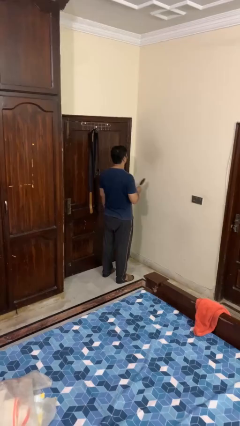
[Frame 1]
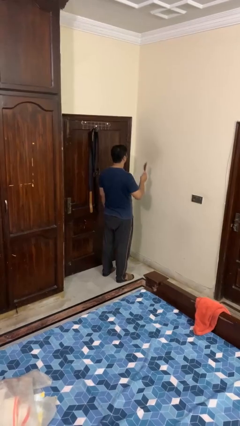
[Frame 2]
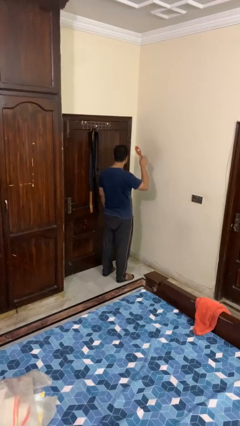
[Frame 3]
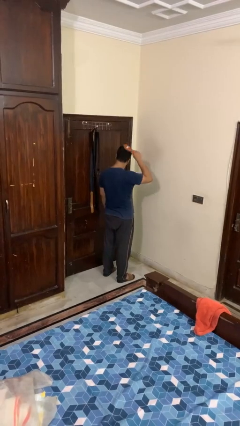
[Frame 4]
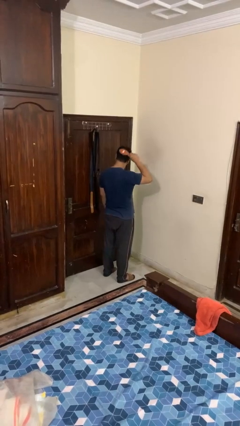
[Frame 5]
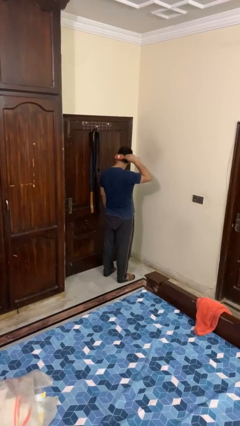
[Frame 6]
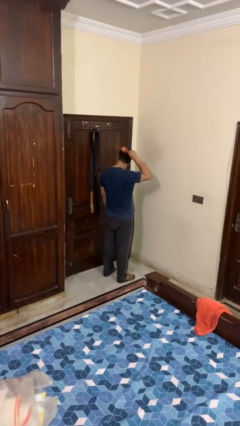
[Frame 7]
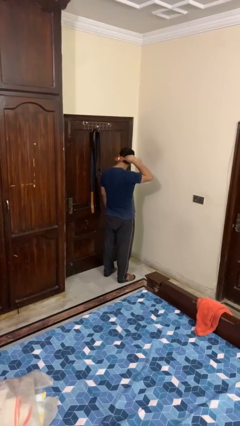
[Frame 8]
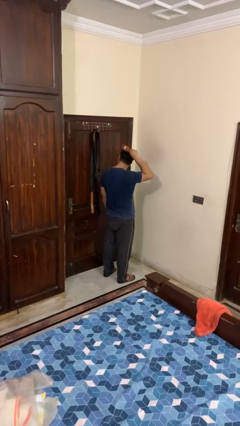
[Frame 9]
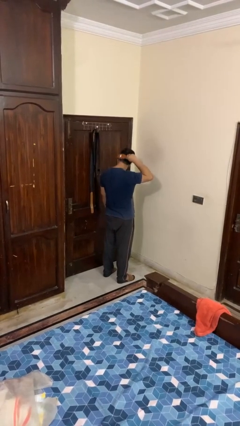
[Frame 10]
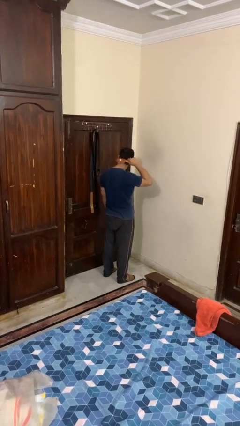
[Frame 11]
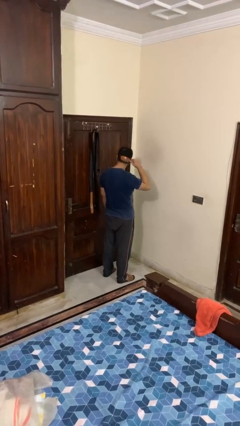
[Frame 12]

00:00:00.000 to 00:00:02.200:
person brushes hair

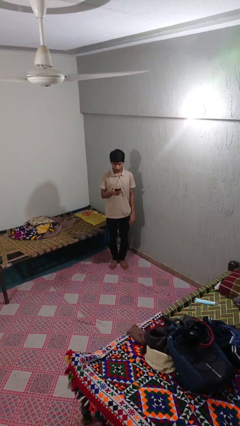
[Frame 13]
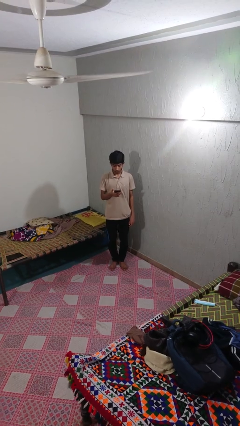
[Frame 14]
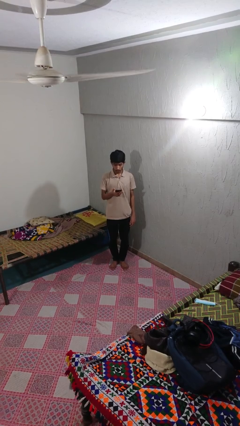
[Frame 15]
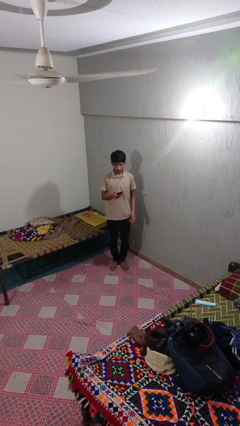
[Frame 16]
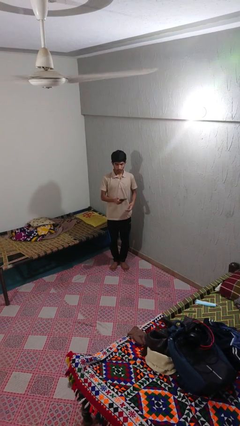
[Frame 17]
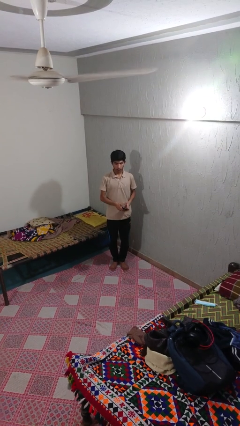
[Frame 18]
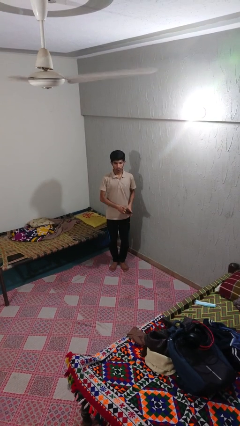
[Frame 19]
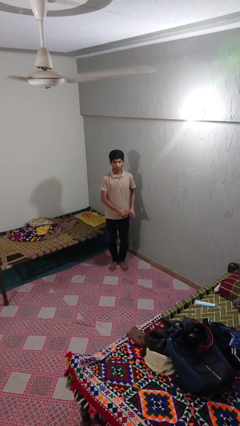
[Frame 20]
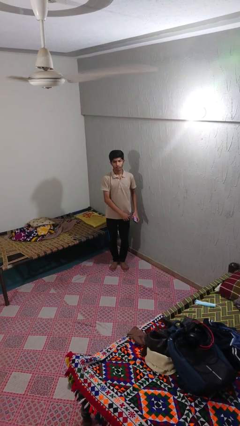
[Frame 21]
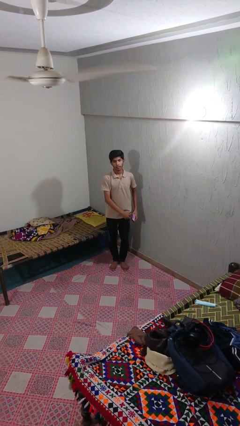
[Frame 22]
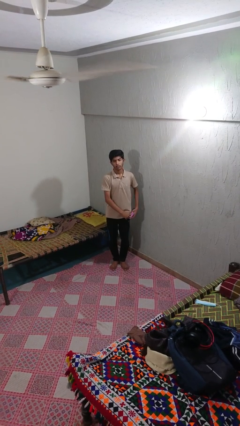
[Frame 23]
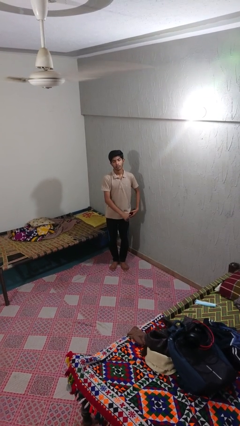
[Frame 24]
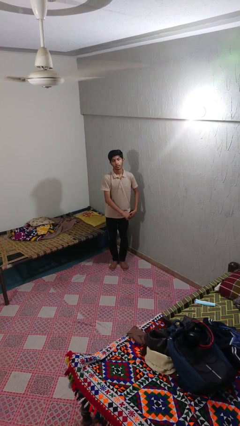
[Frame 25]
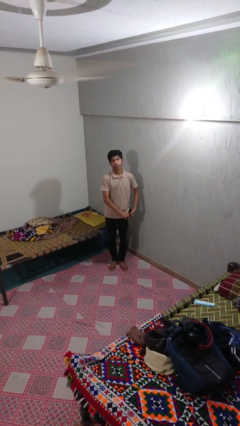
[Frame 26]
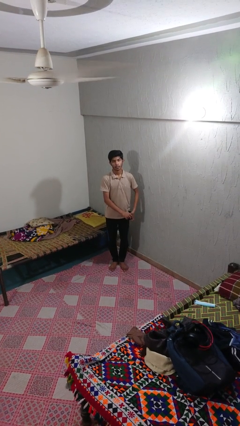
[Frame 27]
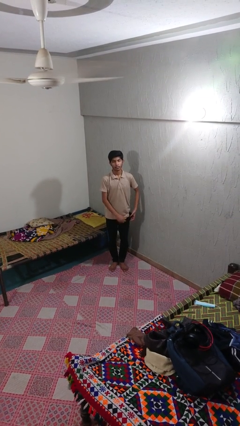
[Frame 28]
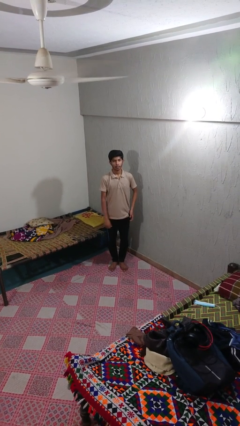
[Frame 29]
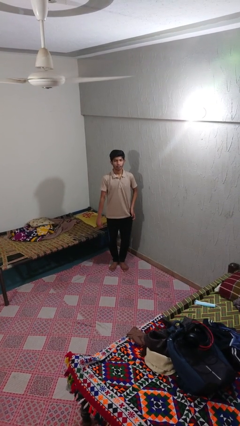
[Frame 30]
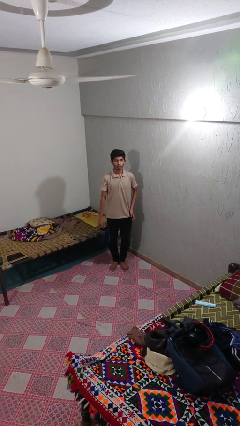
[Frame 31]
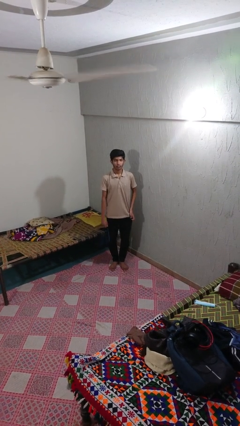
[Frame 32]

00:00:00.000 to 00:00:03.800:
person puts phone into pocket

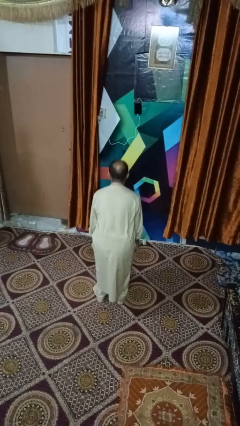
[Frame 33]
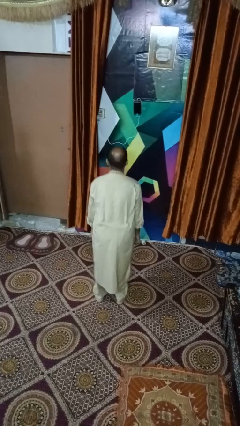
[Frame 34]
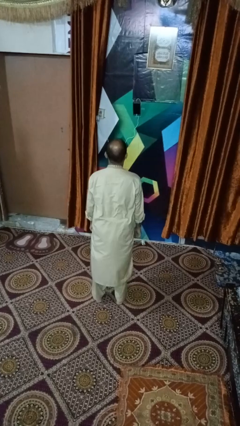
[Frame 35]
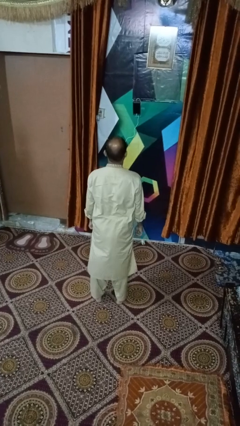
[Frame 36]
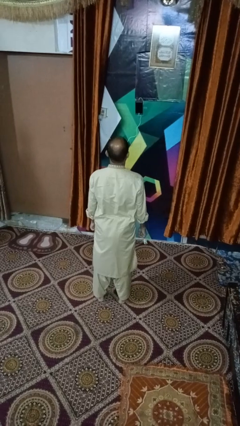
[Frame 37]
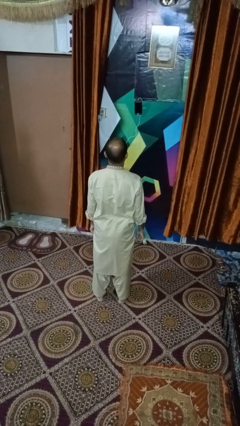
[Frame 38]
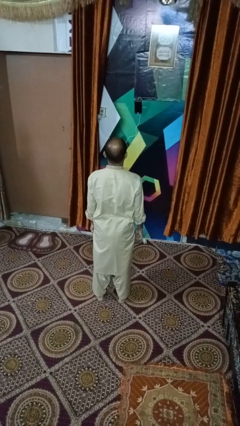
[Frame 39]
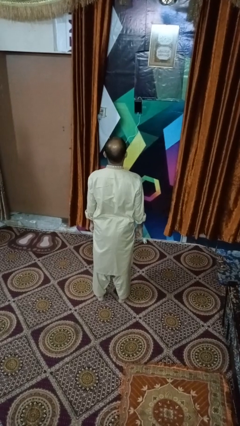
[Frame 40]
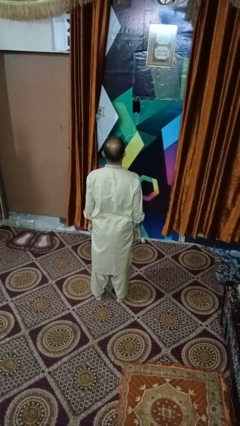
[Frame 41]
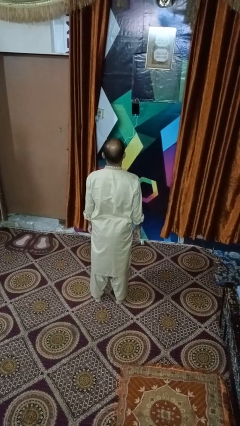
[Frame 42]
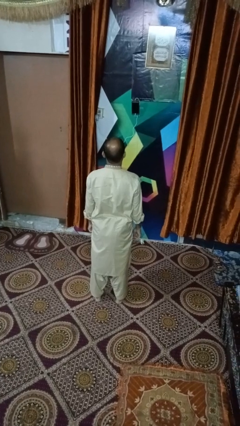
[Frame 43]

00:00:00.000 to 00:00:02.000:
person stands up

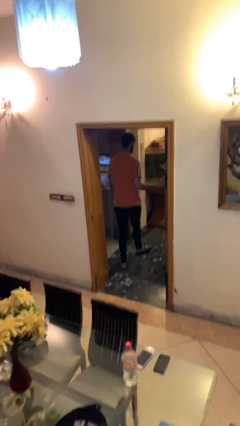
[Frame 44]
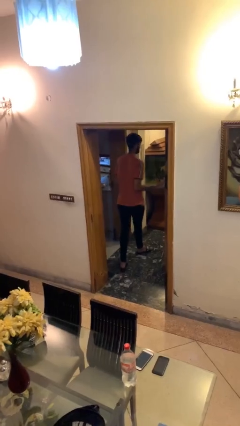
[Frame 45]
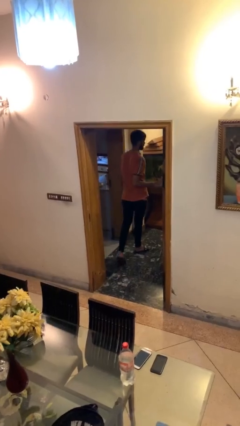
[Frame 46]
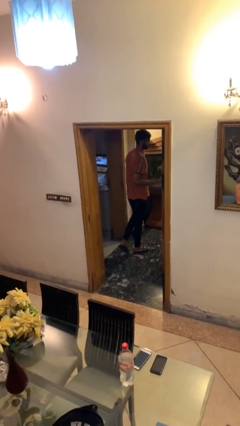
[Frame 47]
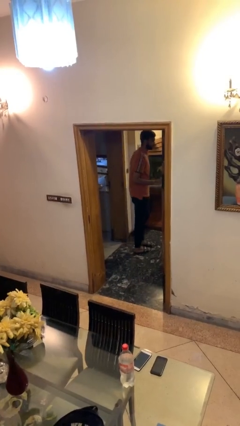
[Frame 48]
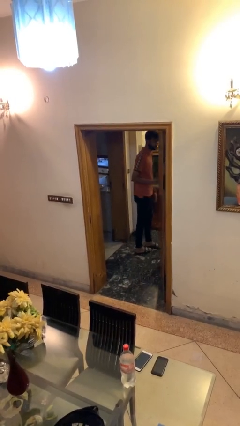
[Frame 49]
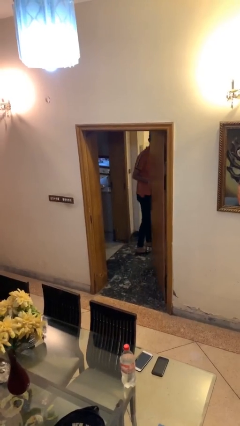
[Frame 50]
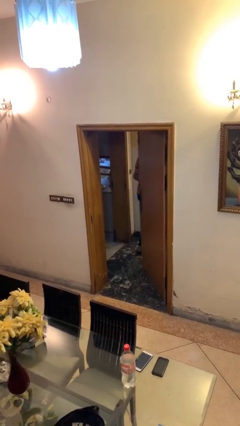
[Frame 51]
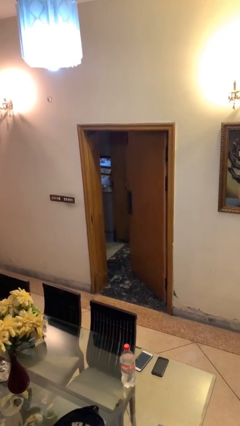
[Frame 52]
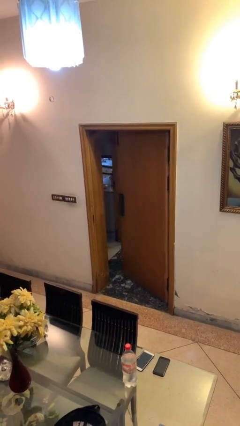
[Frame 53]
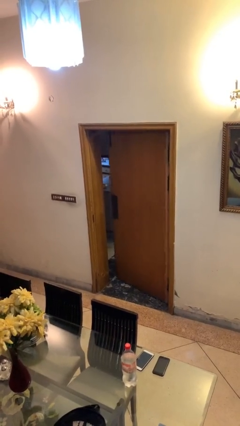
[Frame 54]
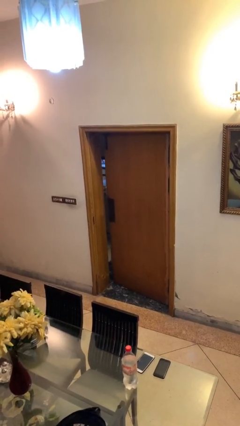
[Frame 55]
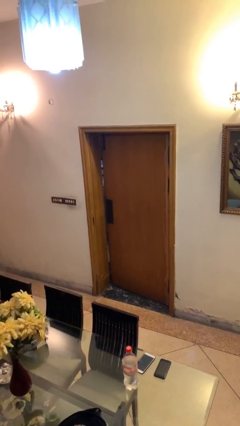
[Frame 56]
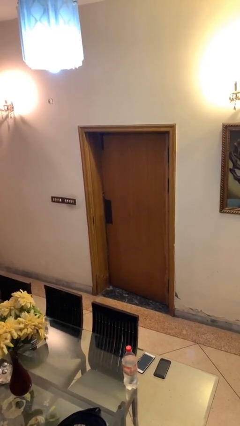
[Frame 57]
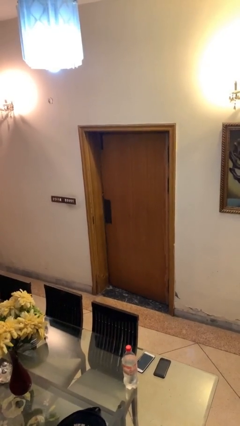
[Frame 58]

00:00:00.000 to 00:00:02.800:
person closes facility door

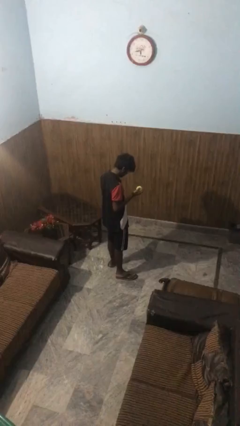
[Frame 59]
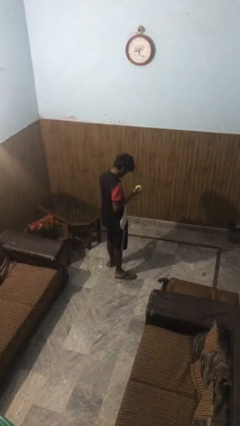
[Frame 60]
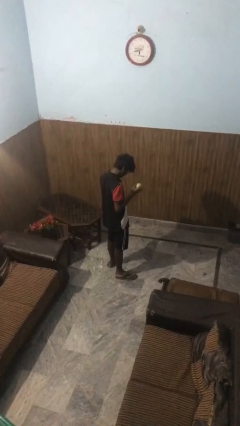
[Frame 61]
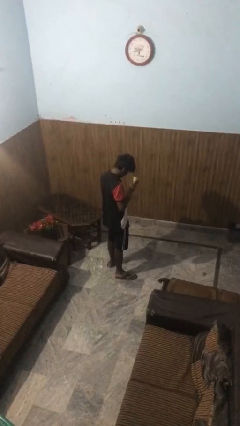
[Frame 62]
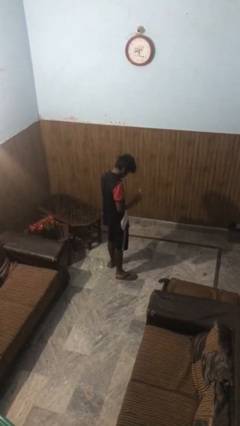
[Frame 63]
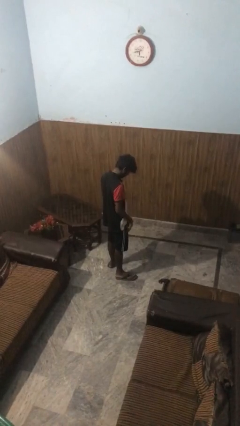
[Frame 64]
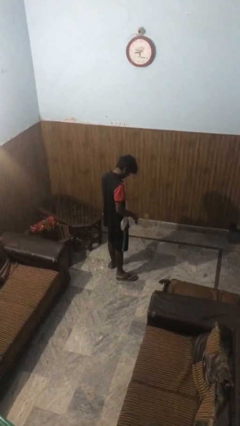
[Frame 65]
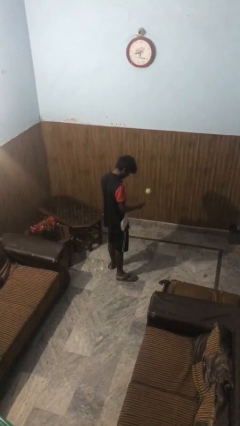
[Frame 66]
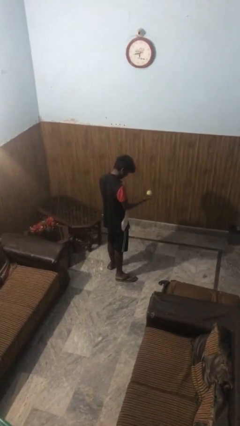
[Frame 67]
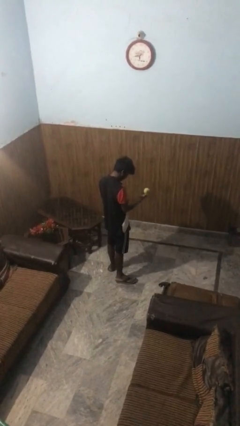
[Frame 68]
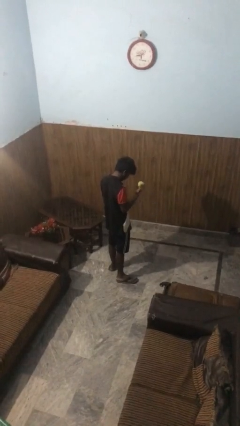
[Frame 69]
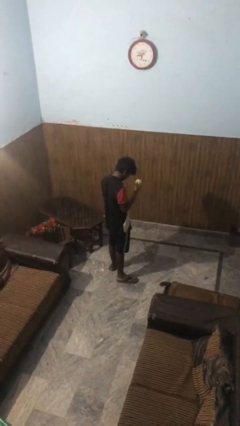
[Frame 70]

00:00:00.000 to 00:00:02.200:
person bounces ball on floor

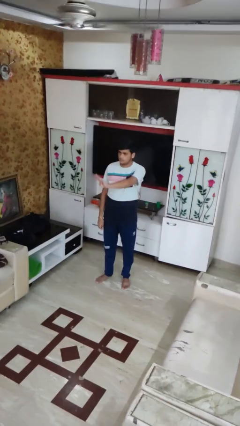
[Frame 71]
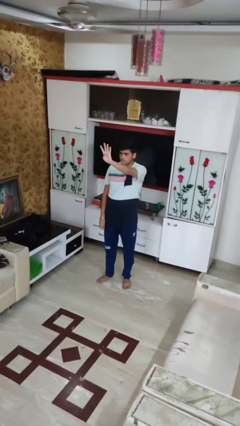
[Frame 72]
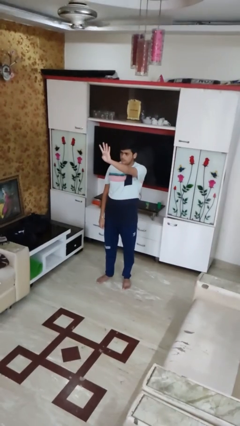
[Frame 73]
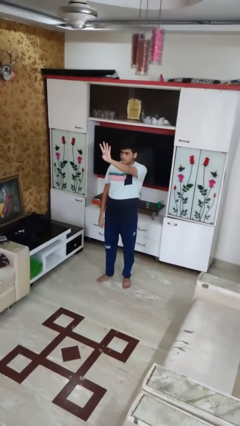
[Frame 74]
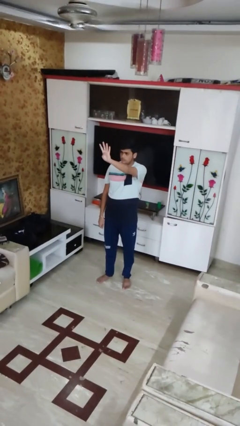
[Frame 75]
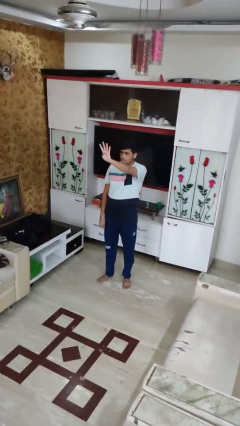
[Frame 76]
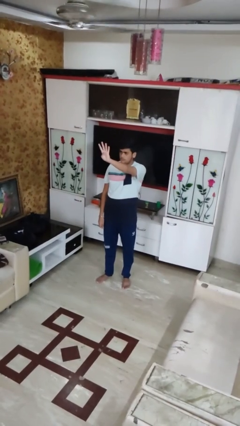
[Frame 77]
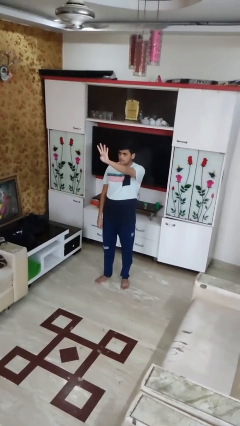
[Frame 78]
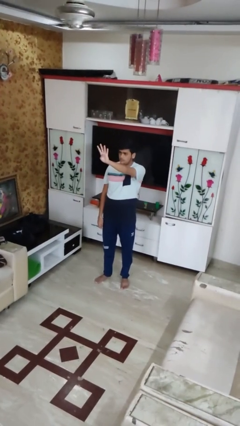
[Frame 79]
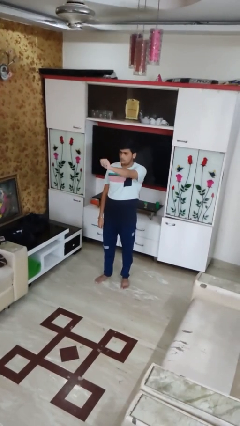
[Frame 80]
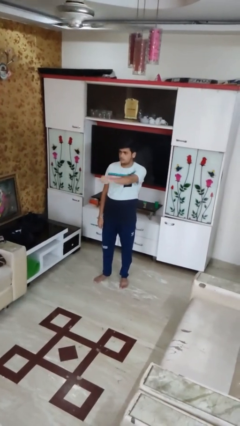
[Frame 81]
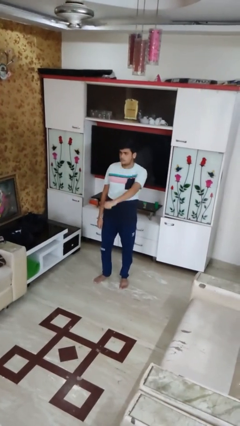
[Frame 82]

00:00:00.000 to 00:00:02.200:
person gestures number four

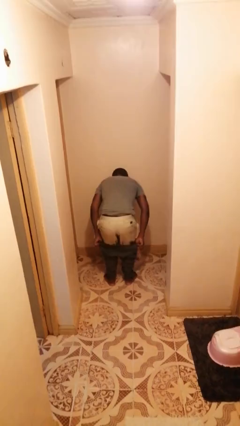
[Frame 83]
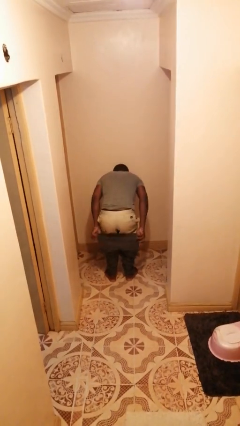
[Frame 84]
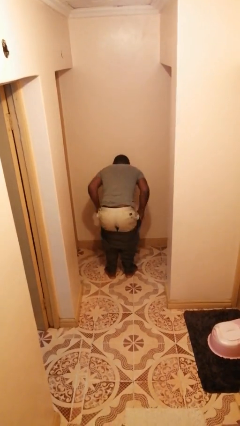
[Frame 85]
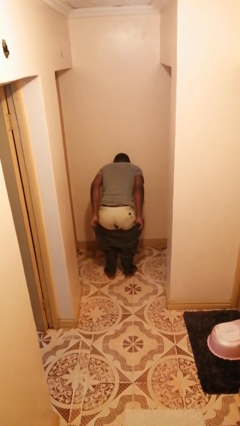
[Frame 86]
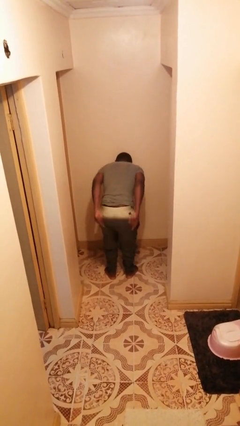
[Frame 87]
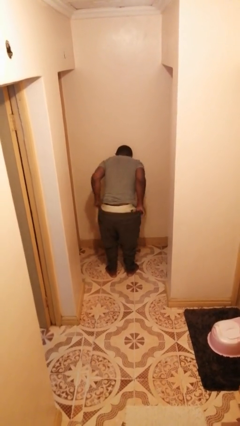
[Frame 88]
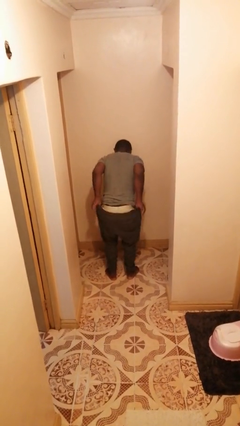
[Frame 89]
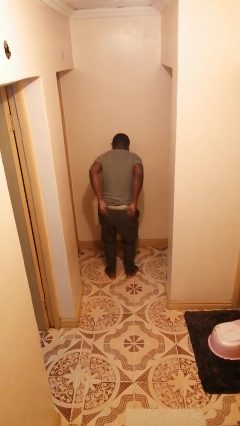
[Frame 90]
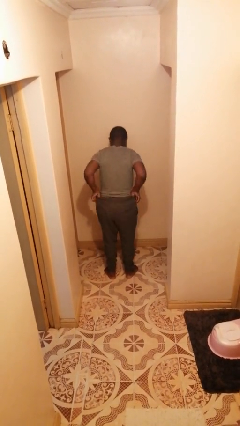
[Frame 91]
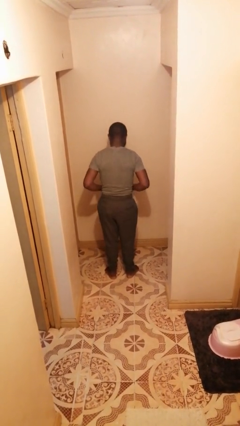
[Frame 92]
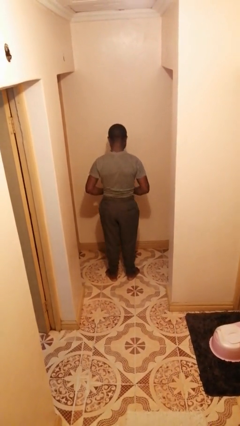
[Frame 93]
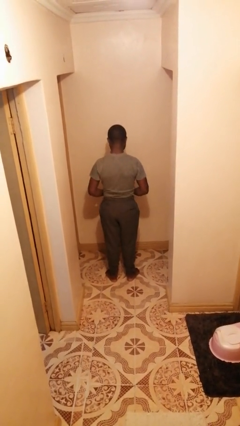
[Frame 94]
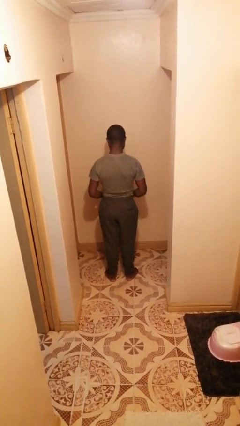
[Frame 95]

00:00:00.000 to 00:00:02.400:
person puts on pants
